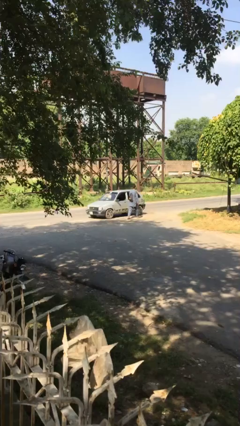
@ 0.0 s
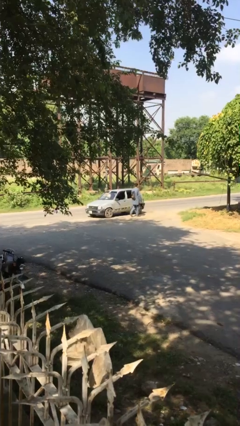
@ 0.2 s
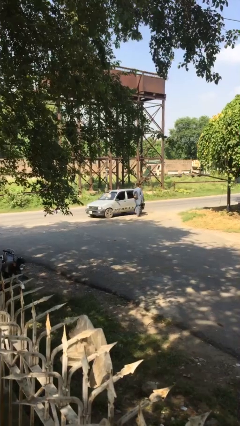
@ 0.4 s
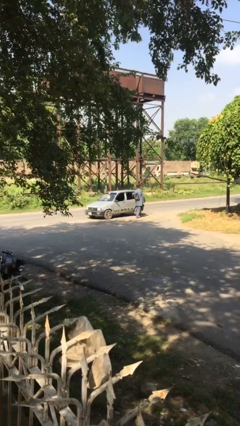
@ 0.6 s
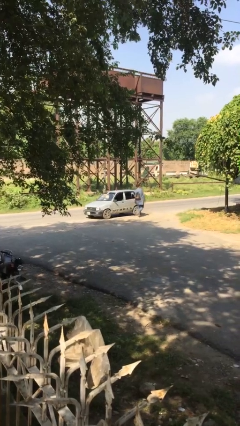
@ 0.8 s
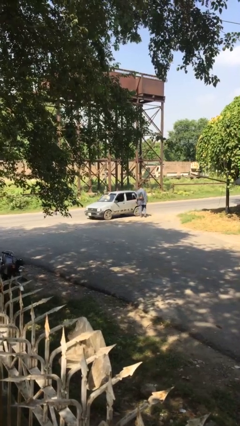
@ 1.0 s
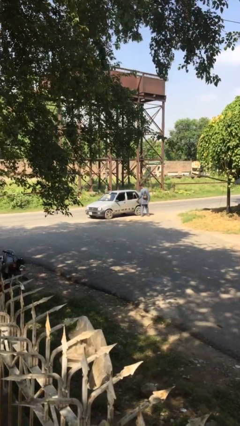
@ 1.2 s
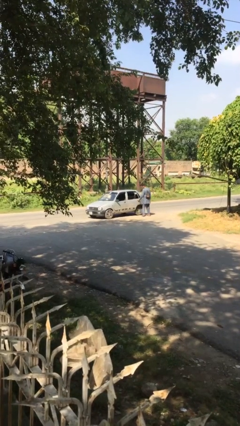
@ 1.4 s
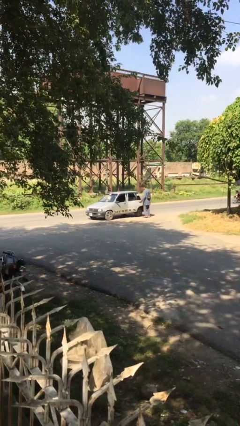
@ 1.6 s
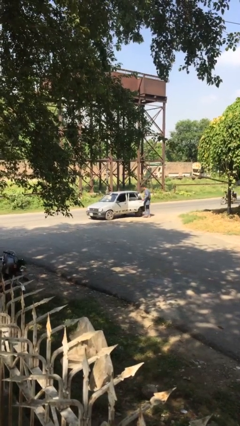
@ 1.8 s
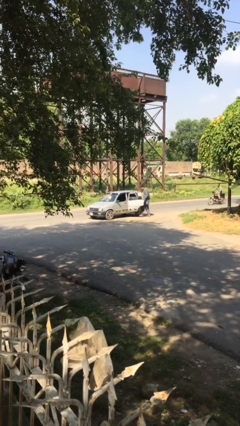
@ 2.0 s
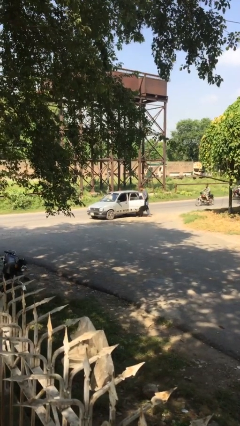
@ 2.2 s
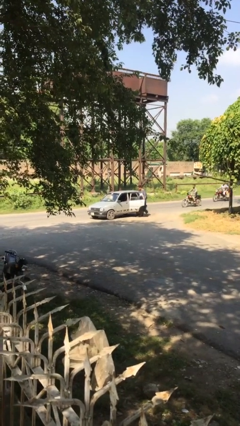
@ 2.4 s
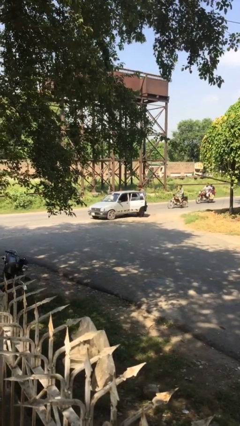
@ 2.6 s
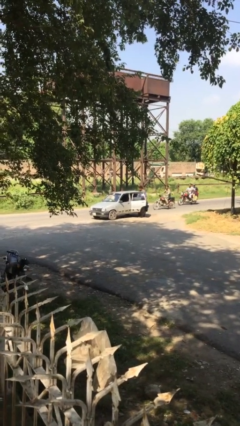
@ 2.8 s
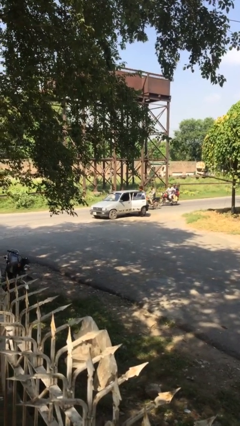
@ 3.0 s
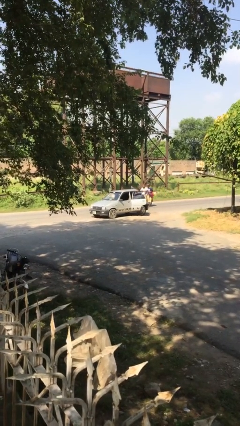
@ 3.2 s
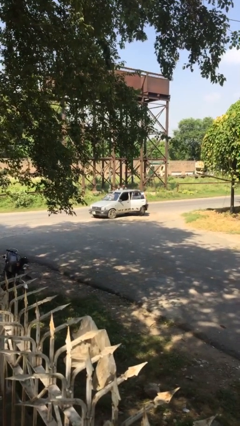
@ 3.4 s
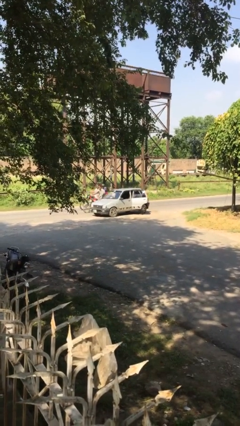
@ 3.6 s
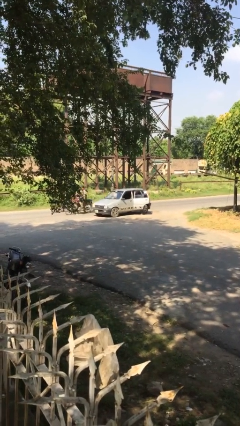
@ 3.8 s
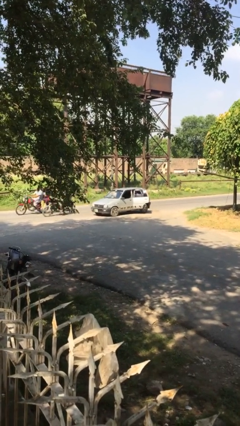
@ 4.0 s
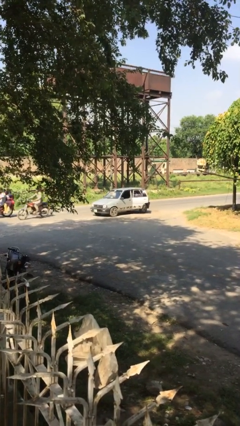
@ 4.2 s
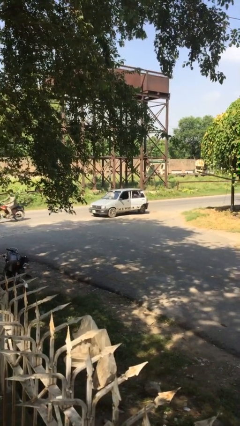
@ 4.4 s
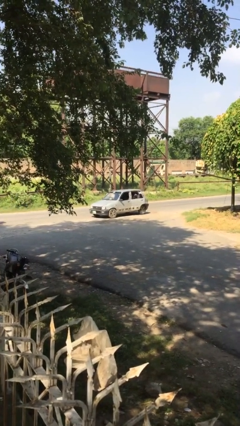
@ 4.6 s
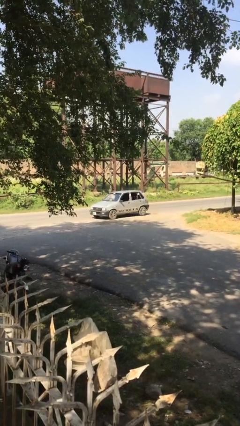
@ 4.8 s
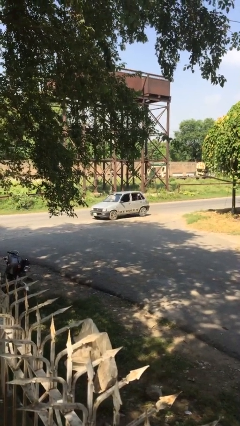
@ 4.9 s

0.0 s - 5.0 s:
car picks up person

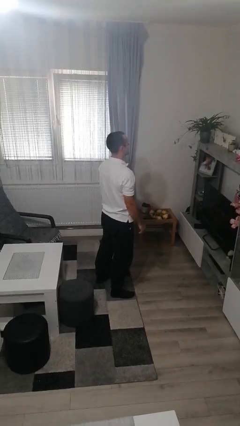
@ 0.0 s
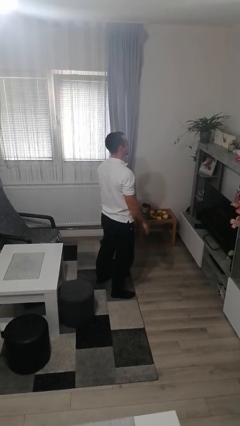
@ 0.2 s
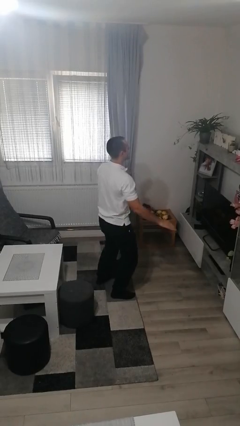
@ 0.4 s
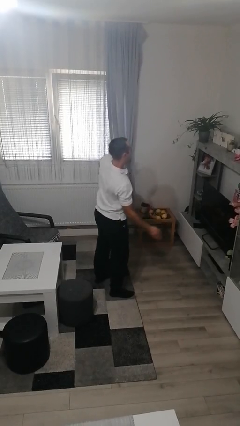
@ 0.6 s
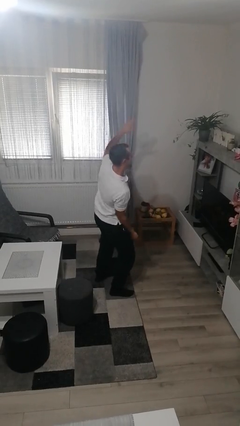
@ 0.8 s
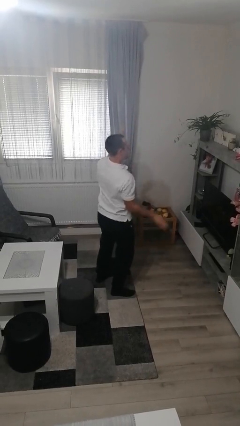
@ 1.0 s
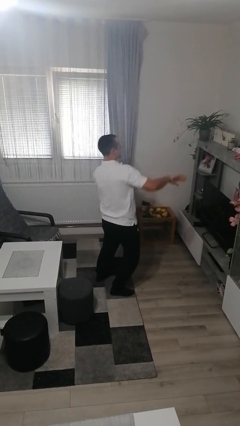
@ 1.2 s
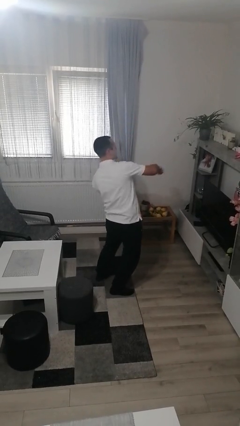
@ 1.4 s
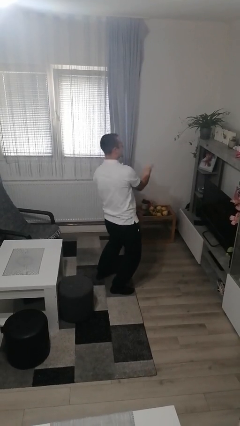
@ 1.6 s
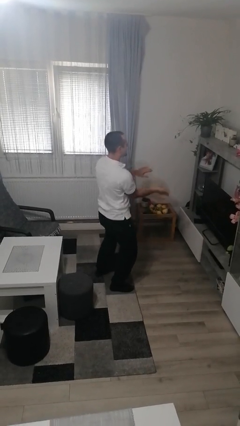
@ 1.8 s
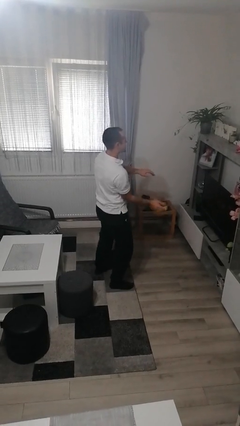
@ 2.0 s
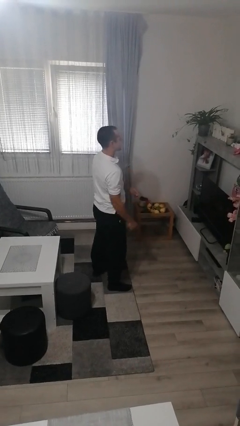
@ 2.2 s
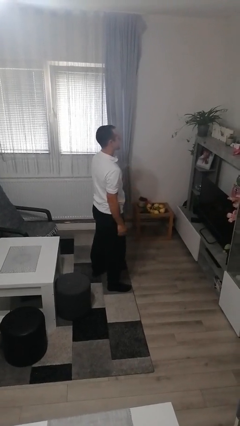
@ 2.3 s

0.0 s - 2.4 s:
person dances in place

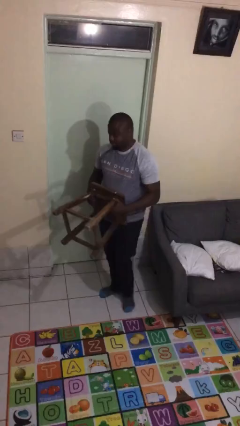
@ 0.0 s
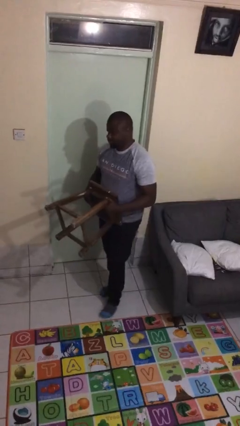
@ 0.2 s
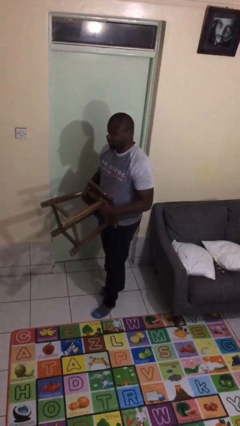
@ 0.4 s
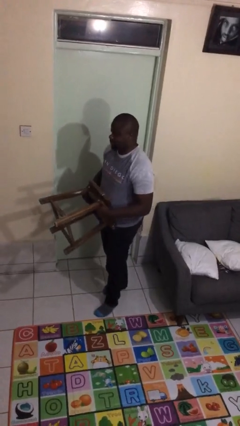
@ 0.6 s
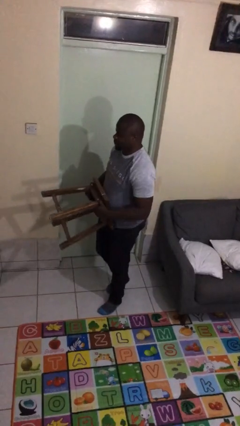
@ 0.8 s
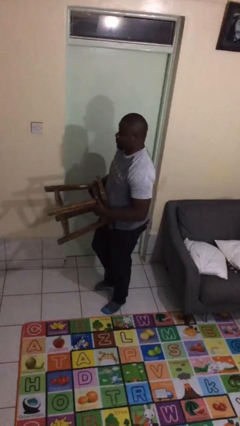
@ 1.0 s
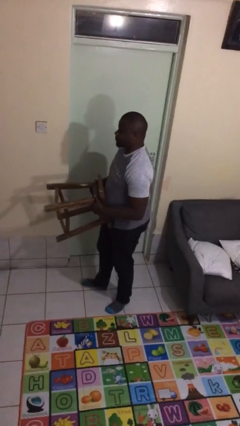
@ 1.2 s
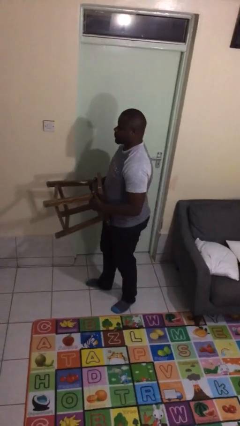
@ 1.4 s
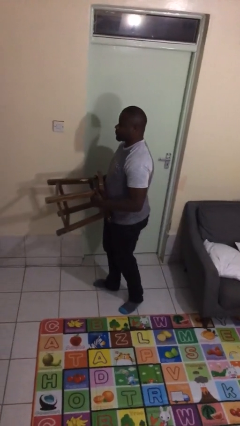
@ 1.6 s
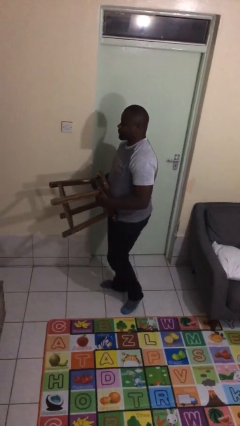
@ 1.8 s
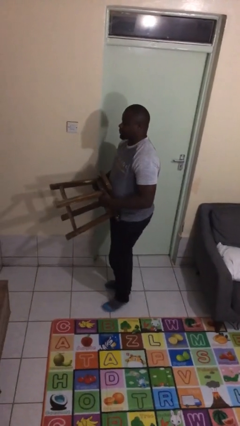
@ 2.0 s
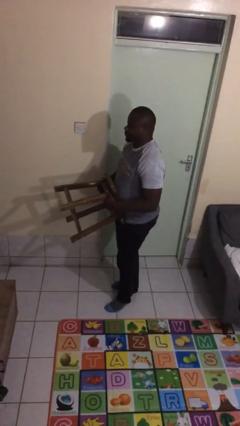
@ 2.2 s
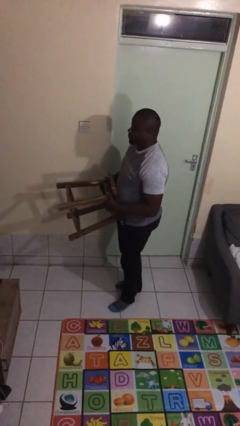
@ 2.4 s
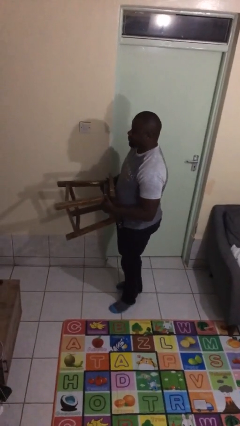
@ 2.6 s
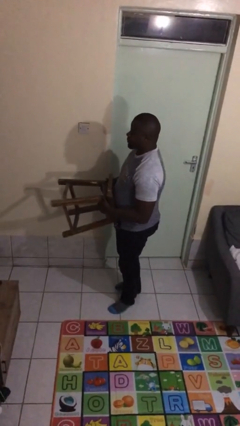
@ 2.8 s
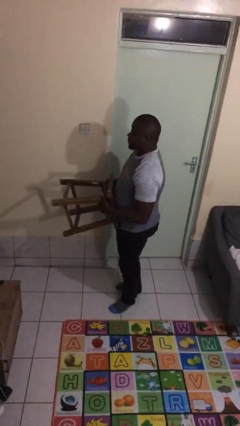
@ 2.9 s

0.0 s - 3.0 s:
person carries furniture

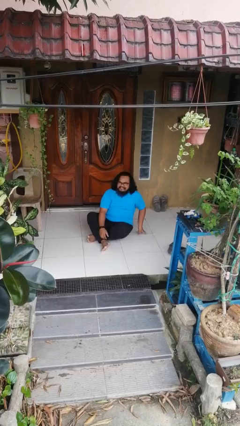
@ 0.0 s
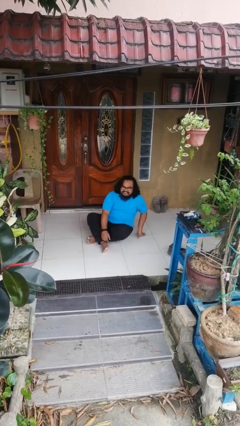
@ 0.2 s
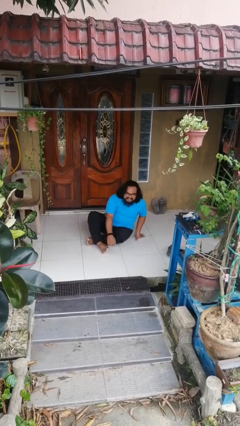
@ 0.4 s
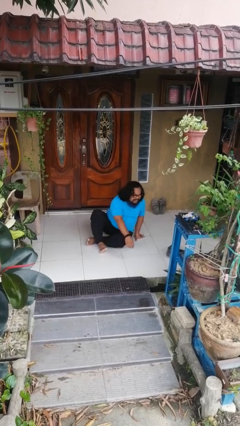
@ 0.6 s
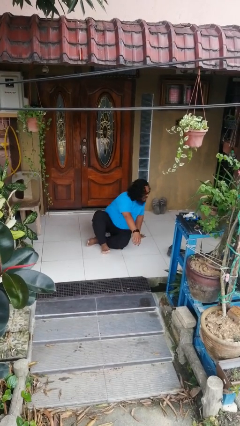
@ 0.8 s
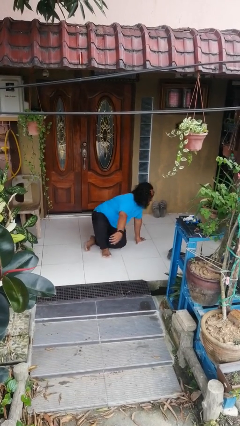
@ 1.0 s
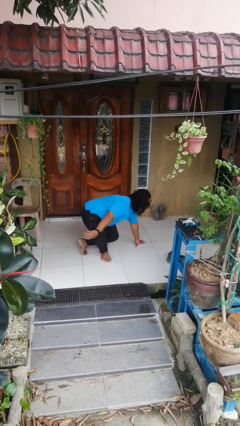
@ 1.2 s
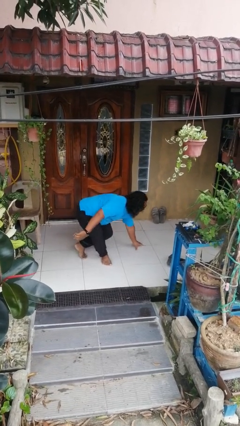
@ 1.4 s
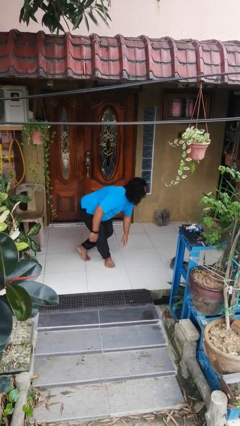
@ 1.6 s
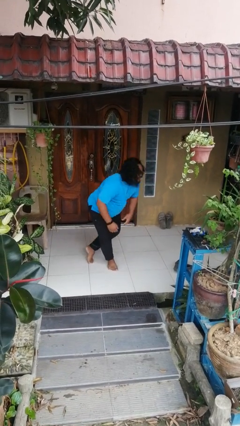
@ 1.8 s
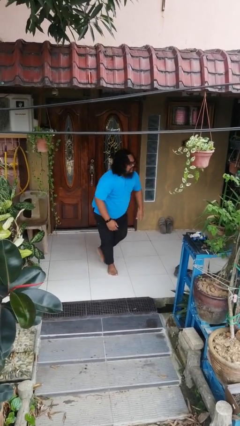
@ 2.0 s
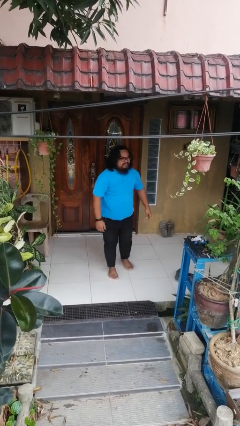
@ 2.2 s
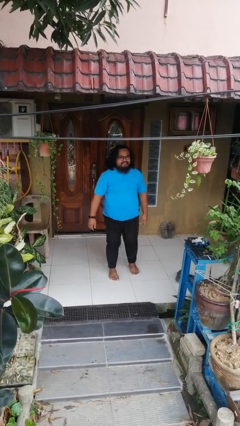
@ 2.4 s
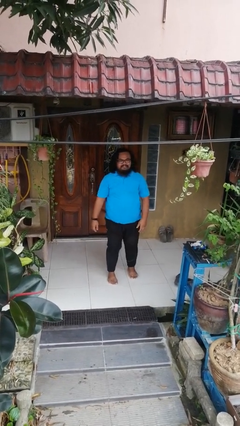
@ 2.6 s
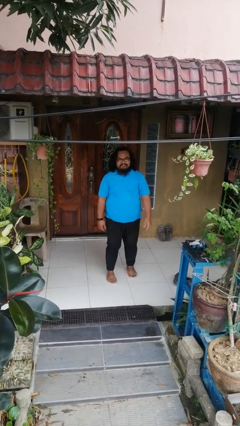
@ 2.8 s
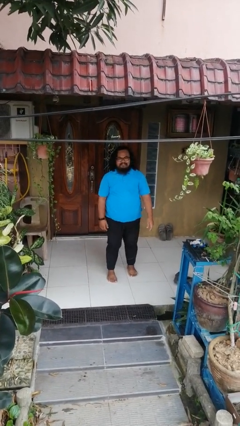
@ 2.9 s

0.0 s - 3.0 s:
person stands up from floor

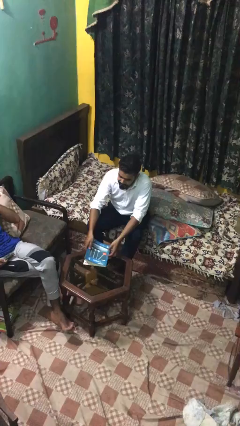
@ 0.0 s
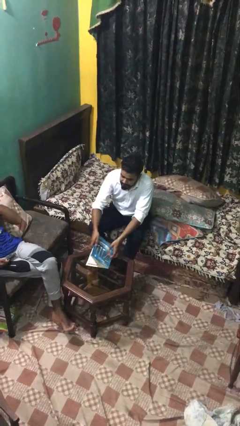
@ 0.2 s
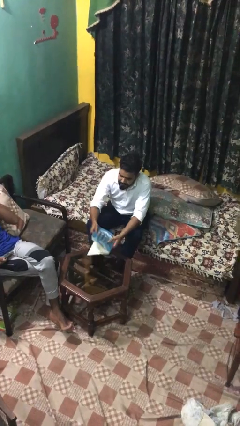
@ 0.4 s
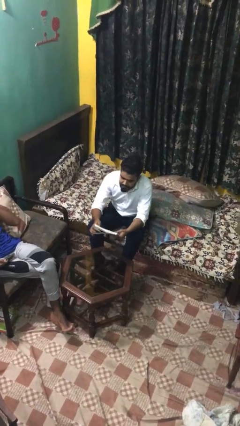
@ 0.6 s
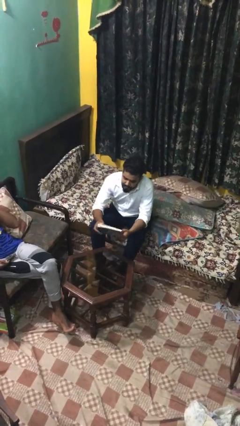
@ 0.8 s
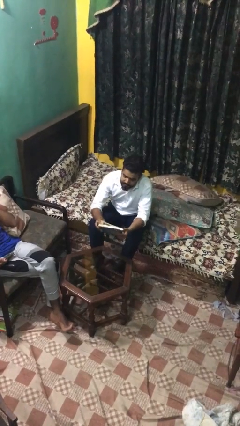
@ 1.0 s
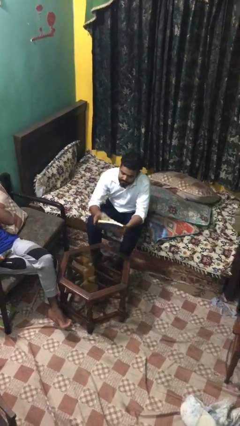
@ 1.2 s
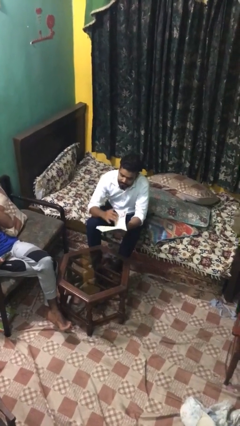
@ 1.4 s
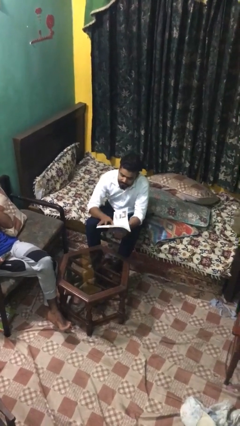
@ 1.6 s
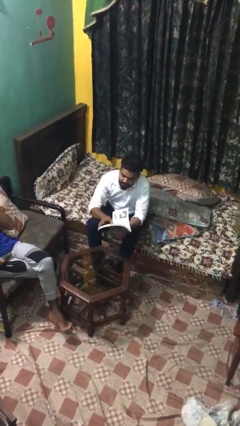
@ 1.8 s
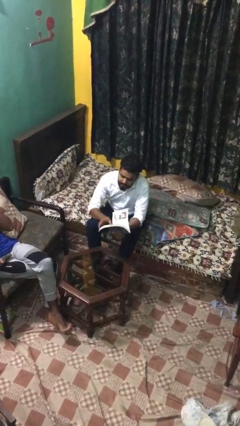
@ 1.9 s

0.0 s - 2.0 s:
person picks up object from table

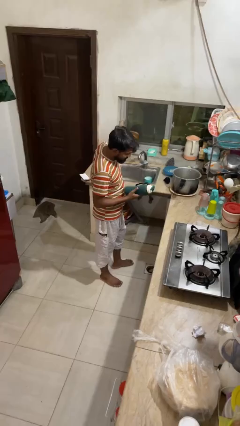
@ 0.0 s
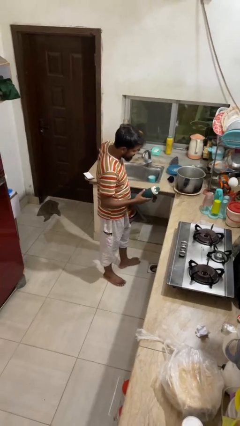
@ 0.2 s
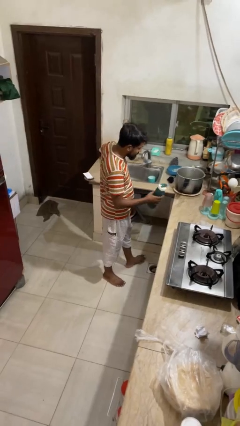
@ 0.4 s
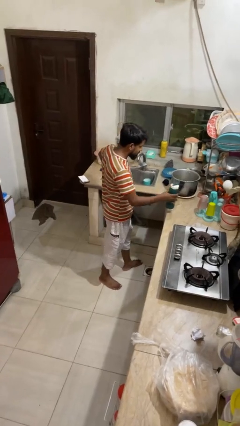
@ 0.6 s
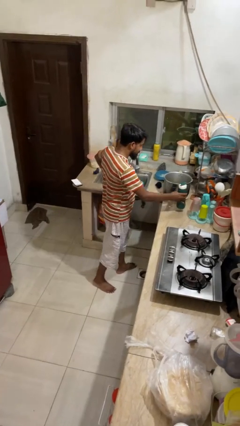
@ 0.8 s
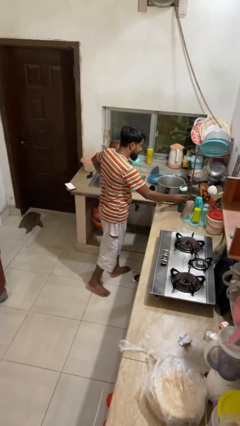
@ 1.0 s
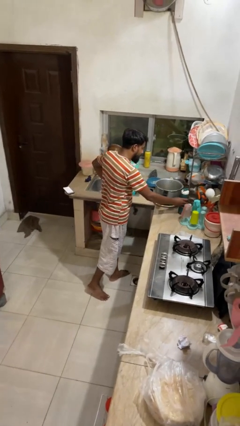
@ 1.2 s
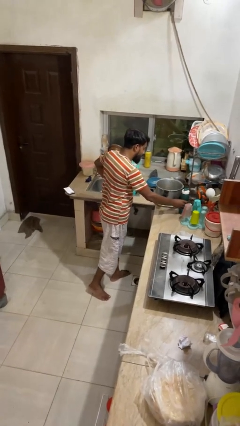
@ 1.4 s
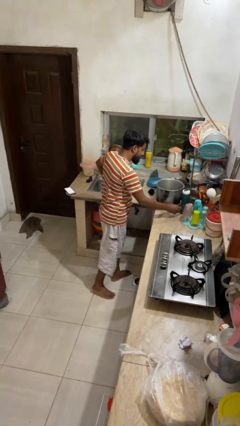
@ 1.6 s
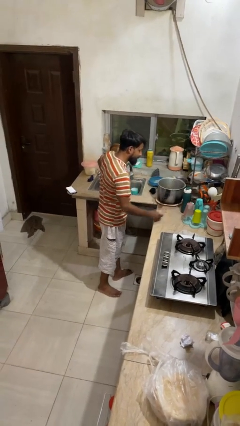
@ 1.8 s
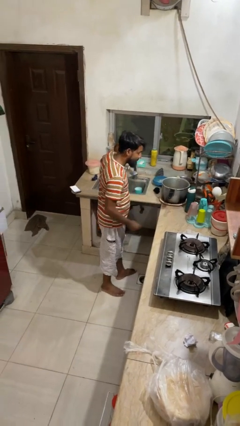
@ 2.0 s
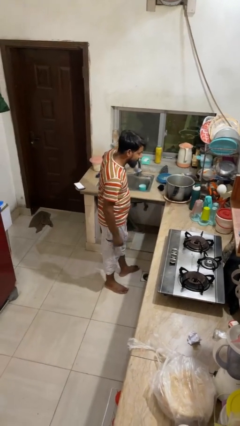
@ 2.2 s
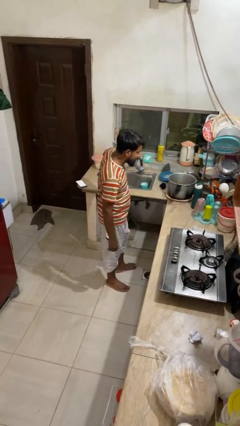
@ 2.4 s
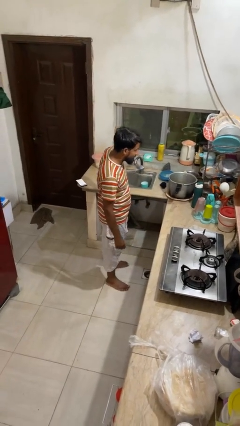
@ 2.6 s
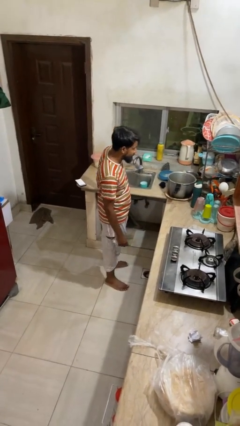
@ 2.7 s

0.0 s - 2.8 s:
person puts down object on countertop
